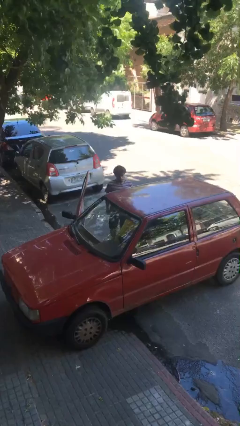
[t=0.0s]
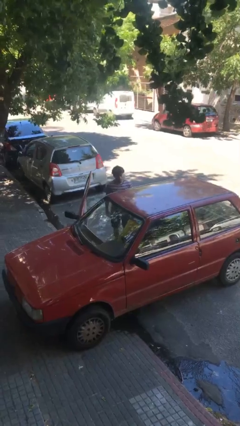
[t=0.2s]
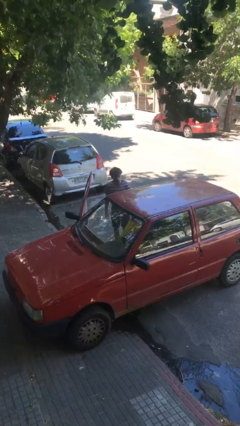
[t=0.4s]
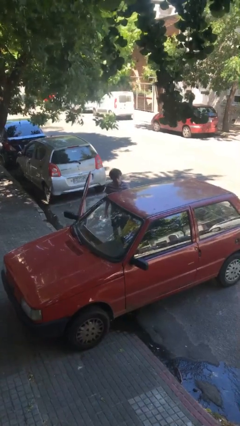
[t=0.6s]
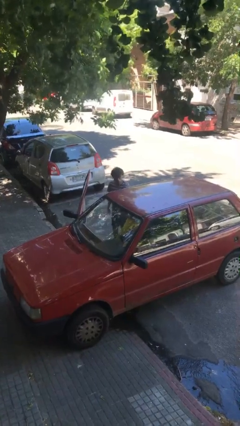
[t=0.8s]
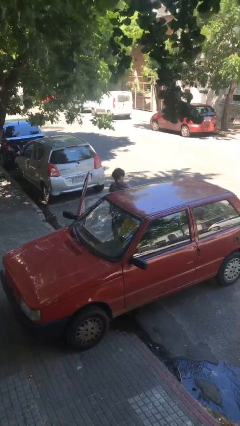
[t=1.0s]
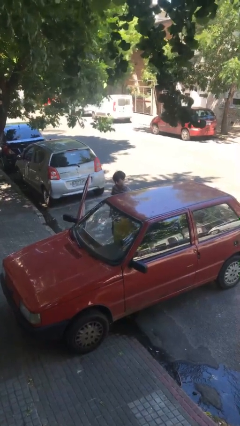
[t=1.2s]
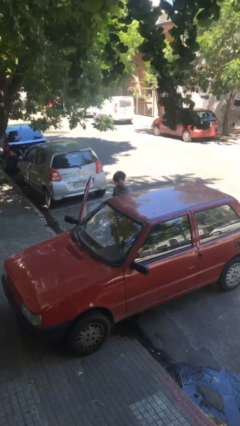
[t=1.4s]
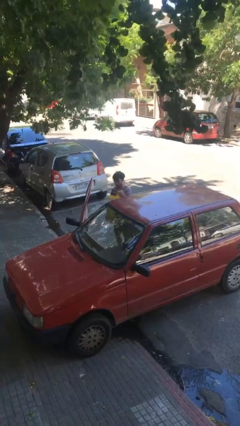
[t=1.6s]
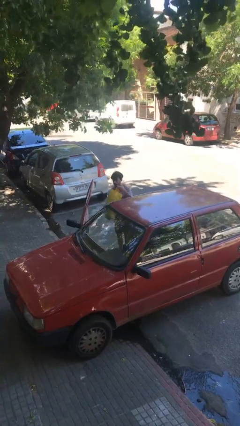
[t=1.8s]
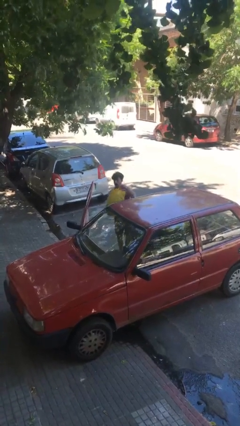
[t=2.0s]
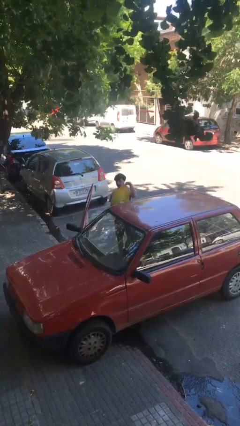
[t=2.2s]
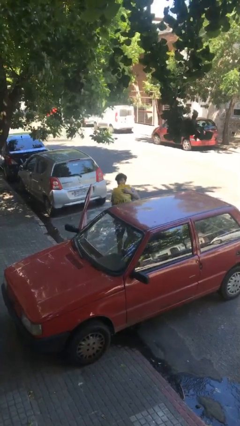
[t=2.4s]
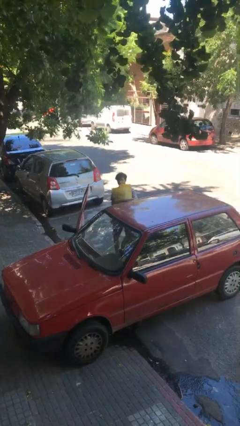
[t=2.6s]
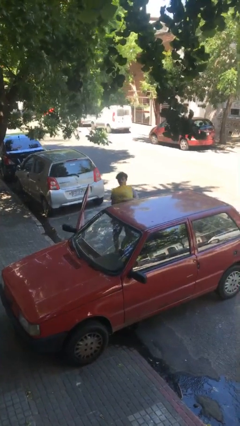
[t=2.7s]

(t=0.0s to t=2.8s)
person unloads car

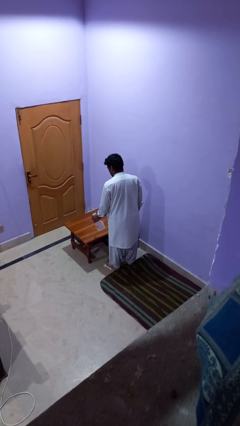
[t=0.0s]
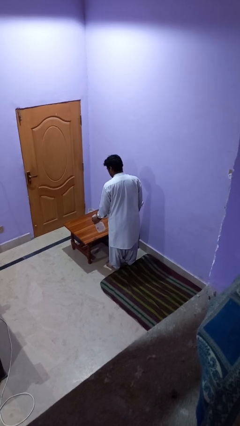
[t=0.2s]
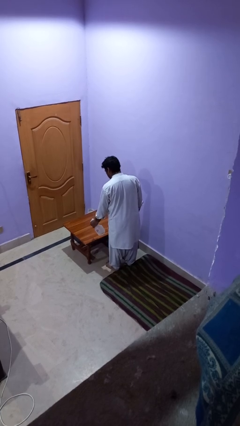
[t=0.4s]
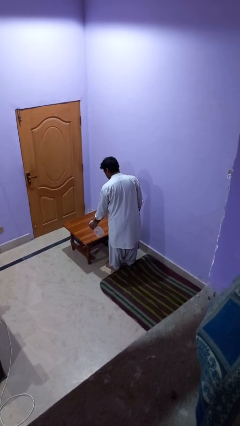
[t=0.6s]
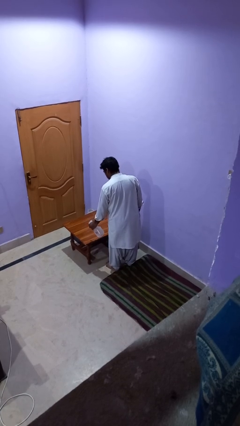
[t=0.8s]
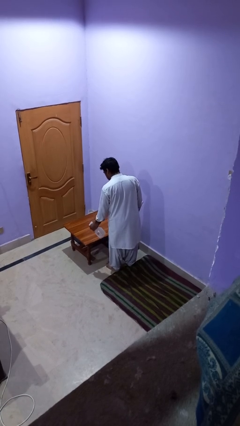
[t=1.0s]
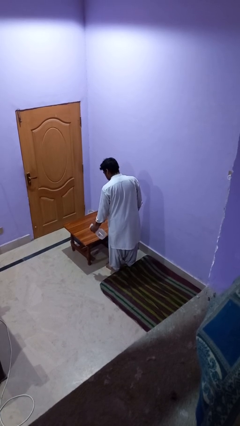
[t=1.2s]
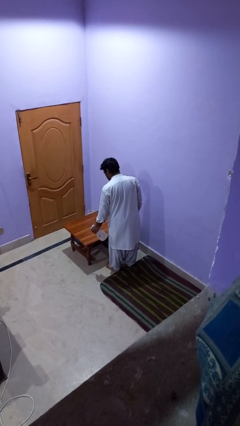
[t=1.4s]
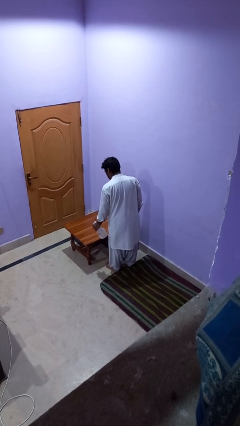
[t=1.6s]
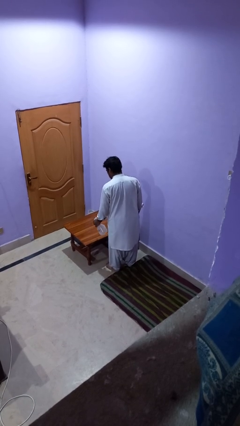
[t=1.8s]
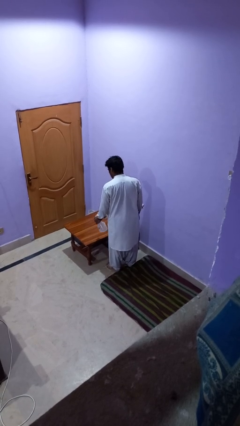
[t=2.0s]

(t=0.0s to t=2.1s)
person sprays from bottle

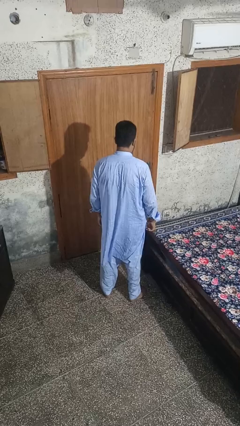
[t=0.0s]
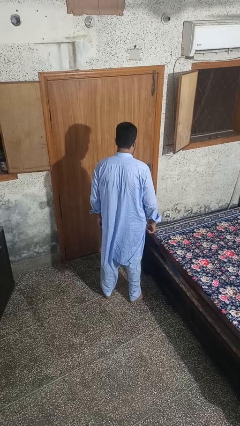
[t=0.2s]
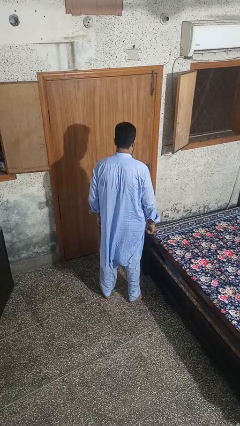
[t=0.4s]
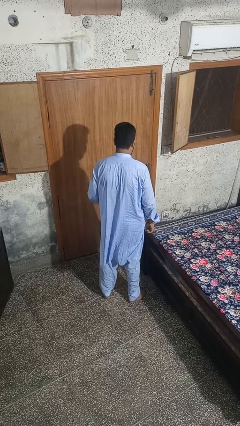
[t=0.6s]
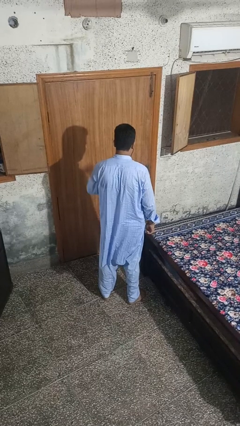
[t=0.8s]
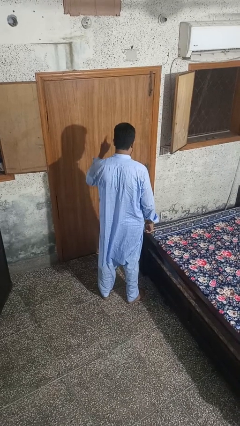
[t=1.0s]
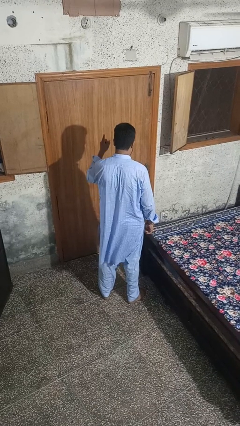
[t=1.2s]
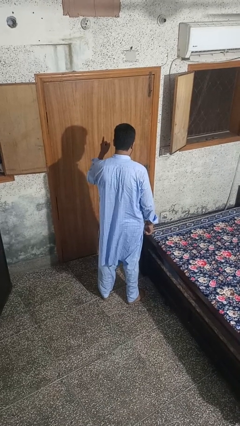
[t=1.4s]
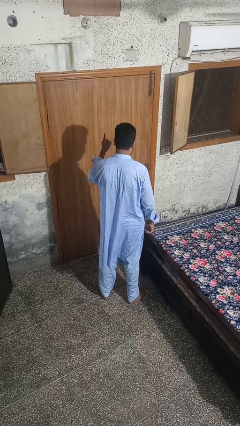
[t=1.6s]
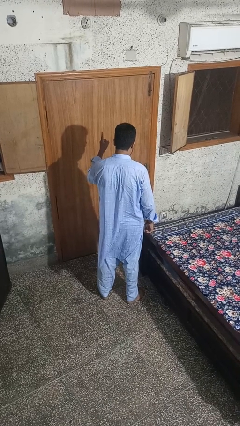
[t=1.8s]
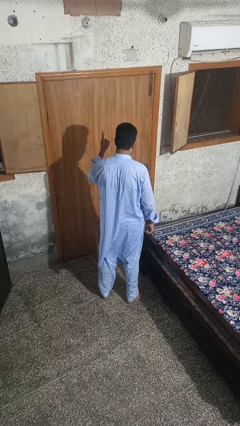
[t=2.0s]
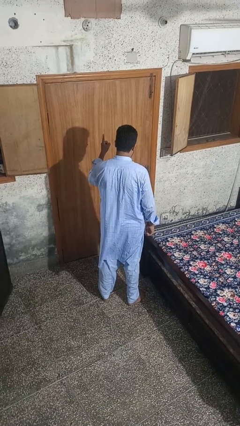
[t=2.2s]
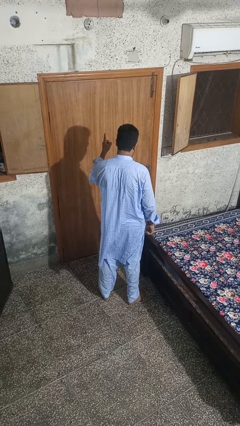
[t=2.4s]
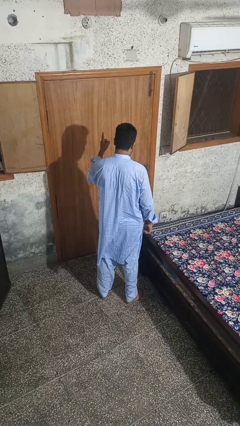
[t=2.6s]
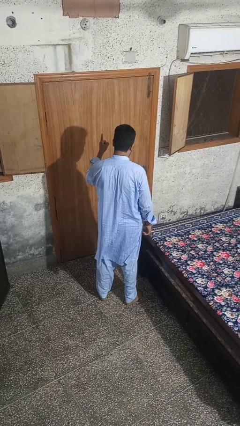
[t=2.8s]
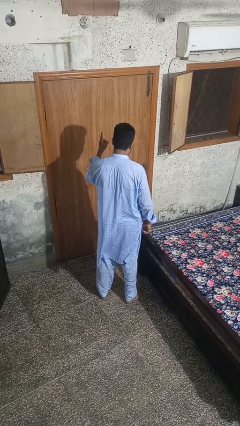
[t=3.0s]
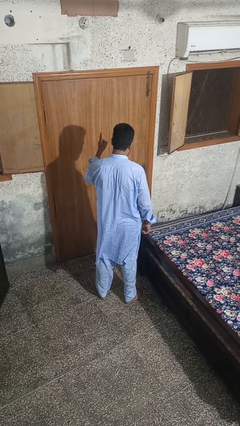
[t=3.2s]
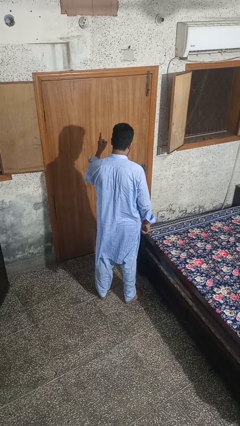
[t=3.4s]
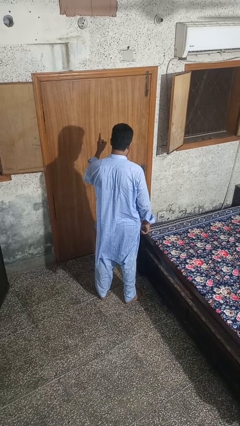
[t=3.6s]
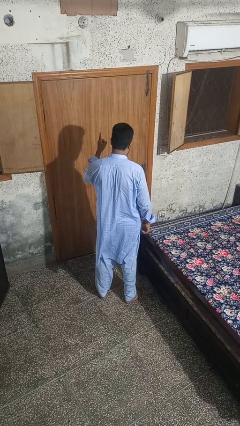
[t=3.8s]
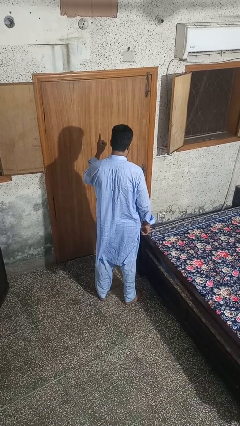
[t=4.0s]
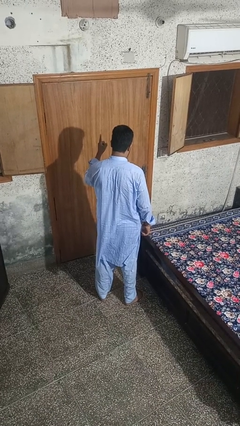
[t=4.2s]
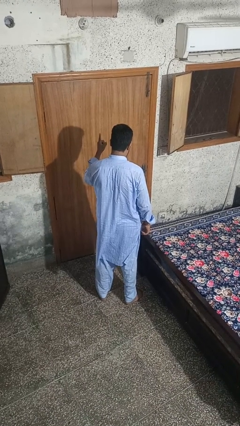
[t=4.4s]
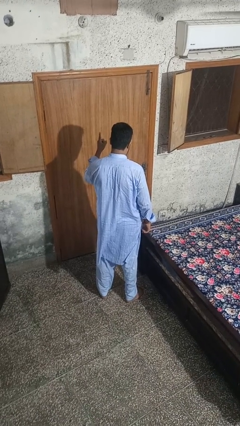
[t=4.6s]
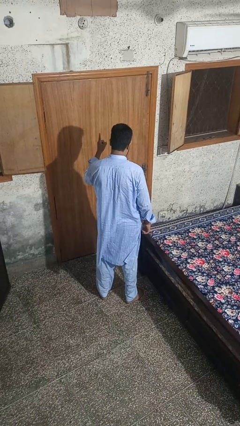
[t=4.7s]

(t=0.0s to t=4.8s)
person gestures number one

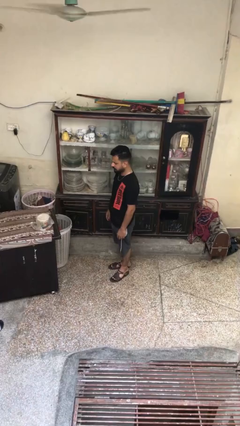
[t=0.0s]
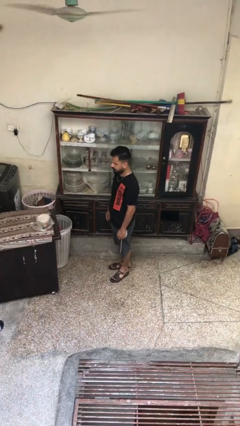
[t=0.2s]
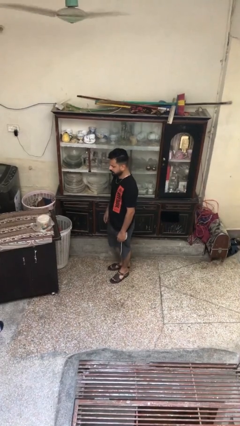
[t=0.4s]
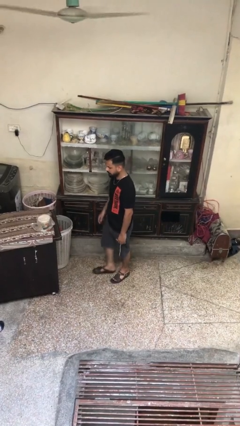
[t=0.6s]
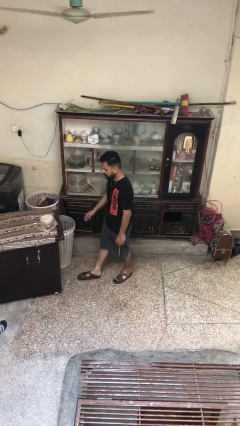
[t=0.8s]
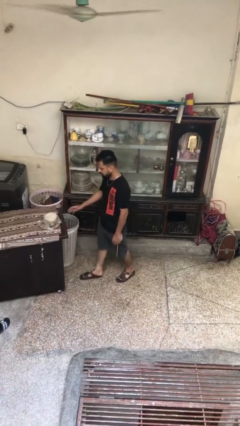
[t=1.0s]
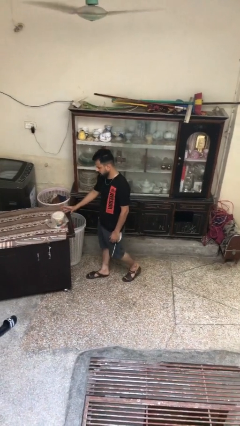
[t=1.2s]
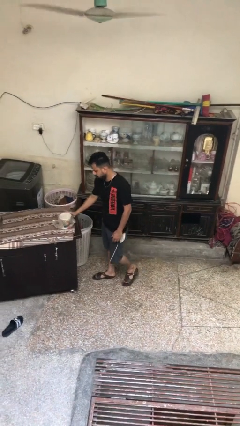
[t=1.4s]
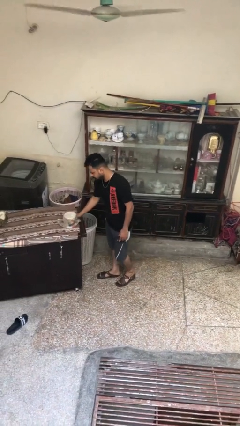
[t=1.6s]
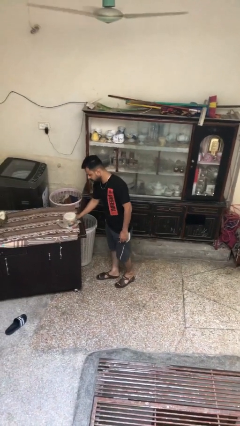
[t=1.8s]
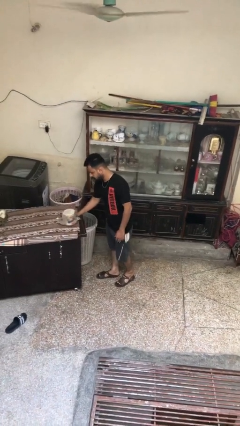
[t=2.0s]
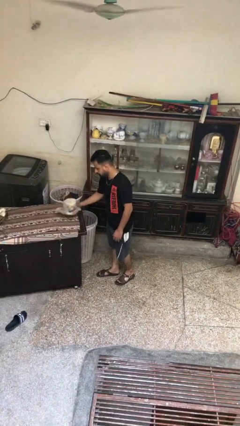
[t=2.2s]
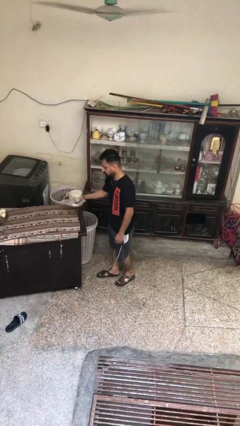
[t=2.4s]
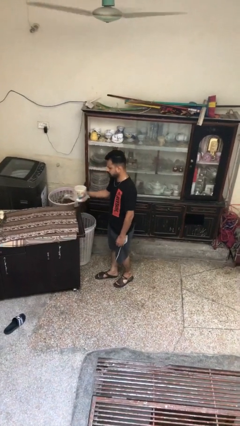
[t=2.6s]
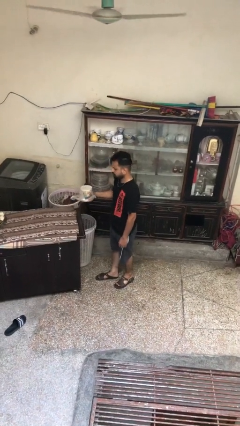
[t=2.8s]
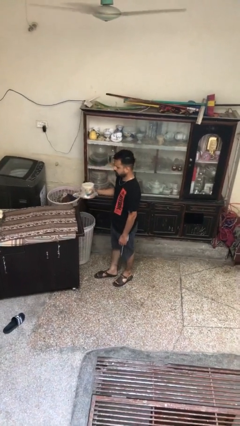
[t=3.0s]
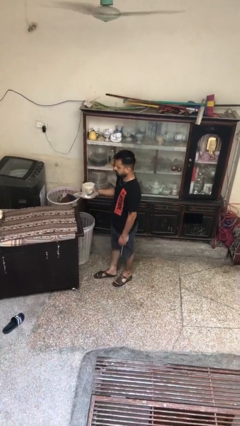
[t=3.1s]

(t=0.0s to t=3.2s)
person picks up object from table

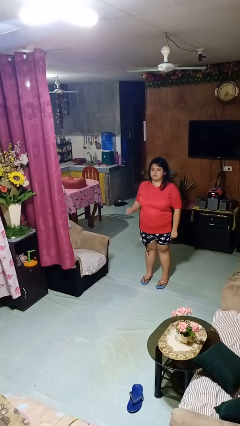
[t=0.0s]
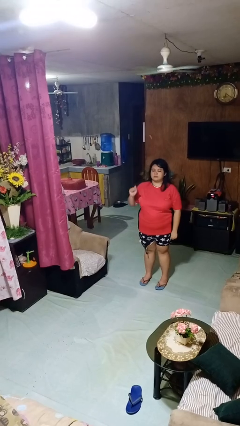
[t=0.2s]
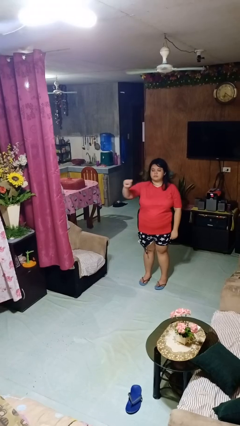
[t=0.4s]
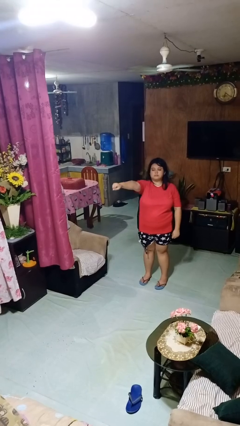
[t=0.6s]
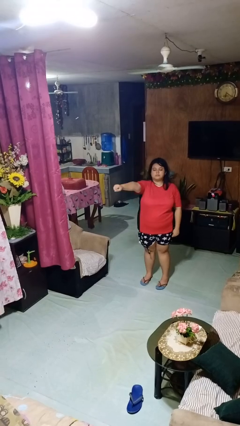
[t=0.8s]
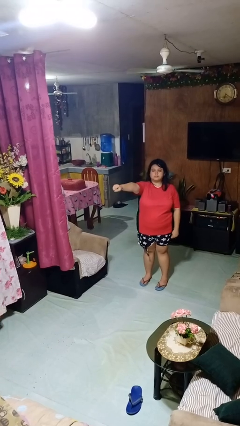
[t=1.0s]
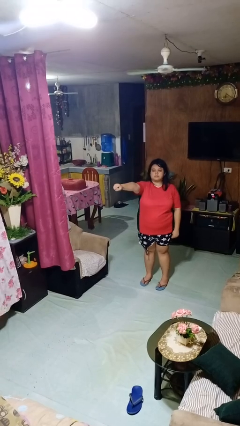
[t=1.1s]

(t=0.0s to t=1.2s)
person punches

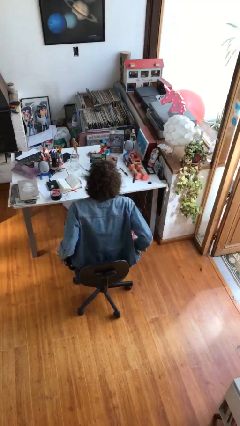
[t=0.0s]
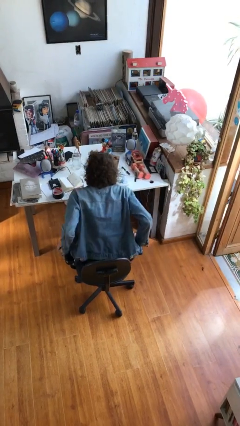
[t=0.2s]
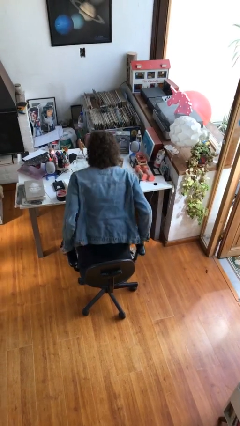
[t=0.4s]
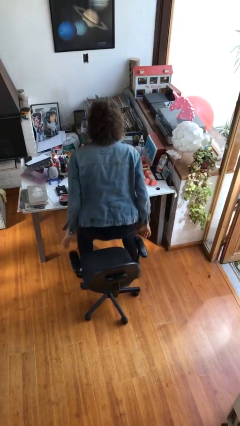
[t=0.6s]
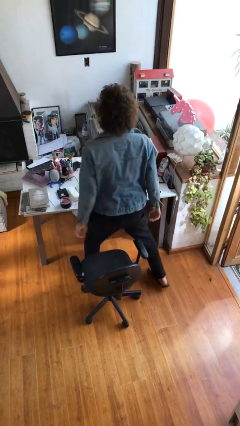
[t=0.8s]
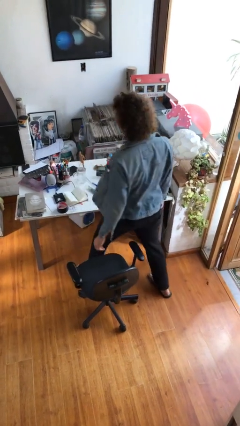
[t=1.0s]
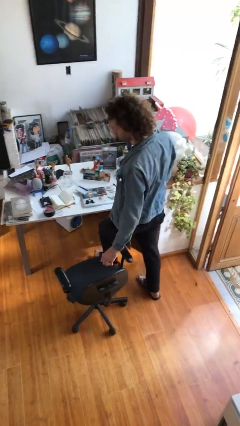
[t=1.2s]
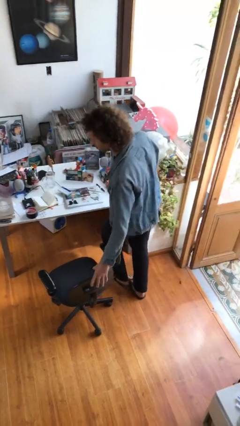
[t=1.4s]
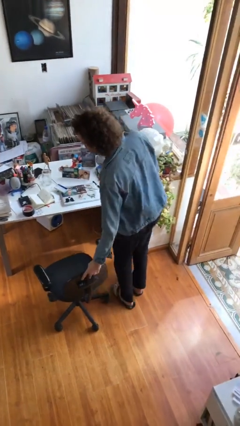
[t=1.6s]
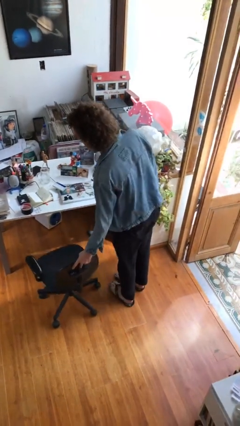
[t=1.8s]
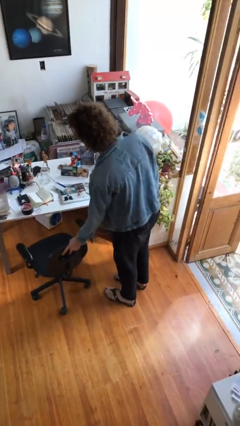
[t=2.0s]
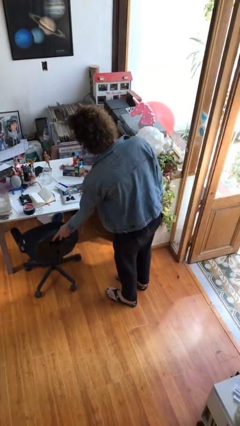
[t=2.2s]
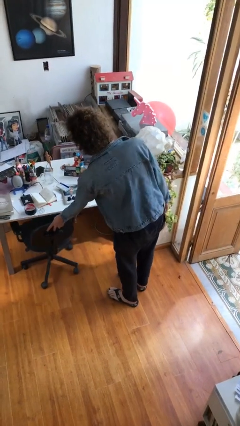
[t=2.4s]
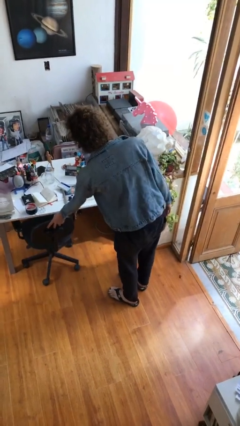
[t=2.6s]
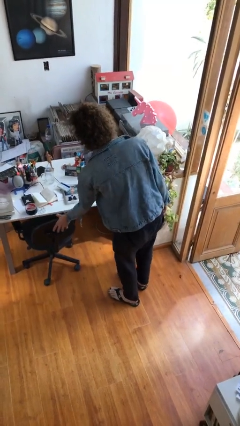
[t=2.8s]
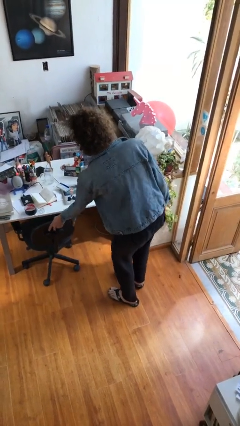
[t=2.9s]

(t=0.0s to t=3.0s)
person stands up
